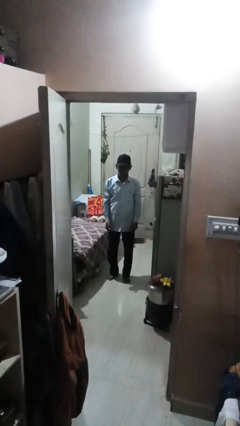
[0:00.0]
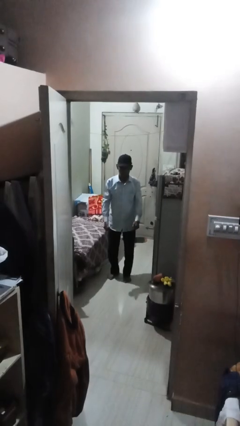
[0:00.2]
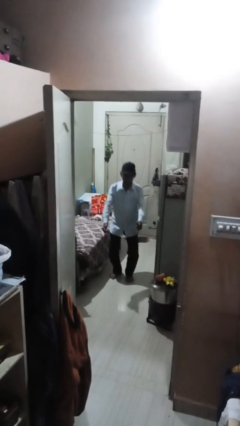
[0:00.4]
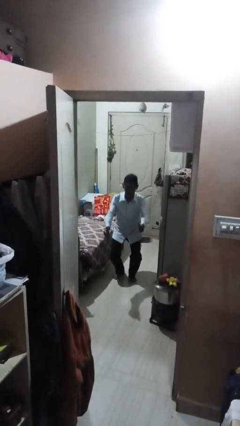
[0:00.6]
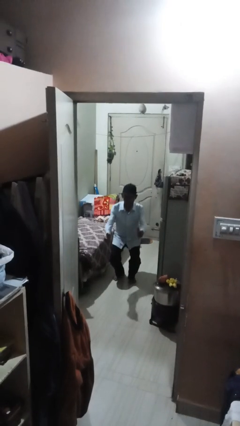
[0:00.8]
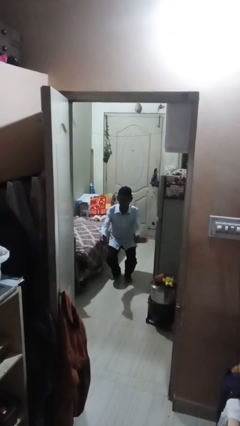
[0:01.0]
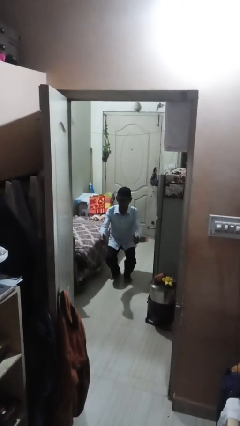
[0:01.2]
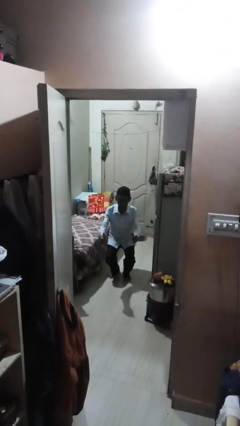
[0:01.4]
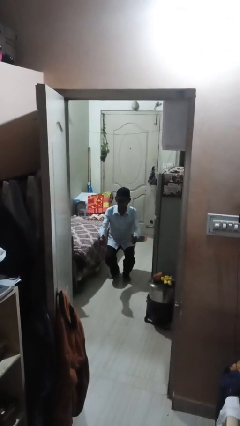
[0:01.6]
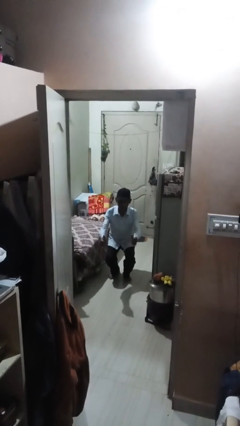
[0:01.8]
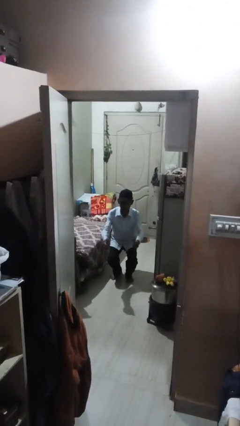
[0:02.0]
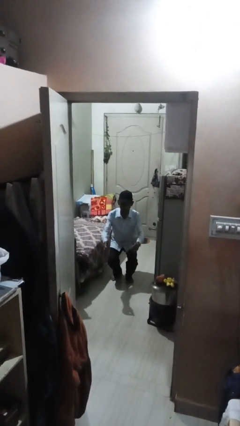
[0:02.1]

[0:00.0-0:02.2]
person squats

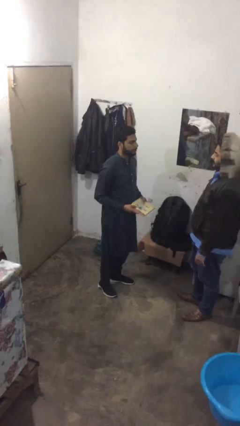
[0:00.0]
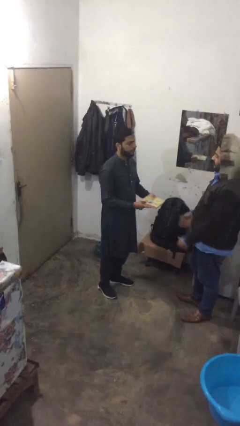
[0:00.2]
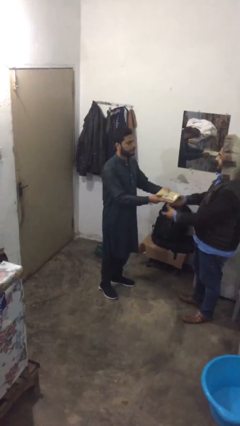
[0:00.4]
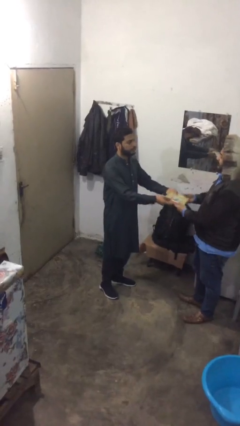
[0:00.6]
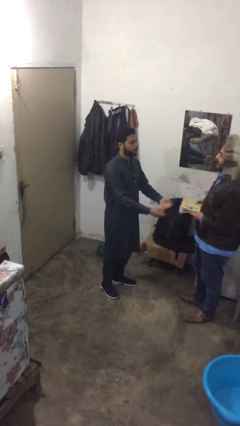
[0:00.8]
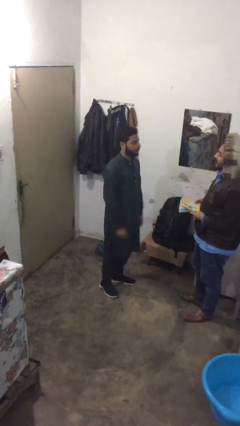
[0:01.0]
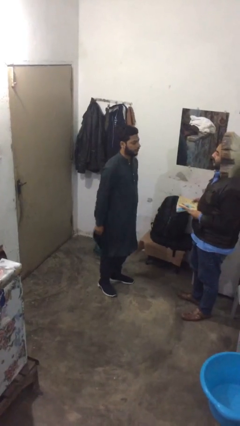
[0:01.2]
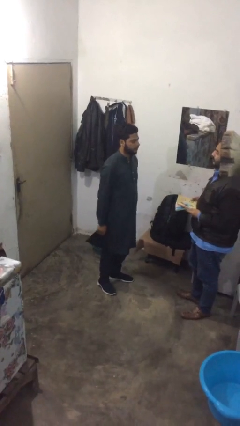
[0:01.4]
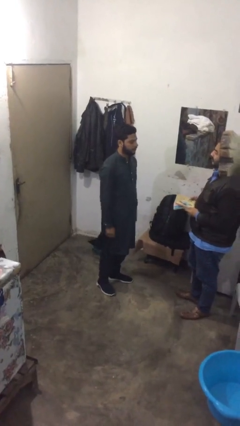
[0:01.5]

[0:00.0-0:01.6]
person transfers object to person

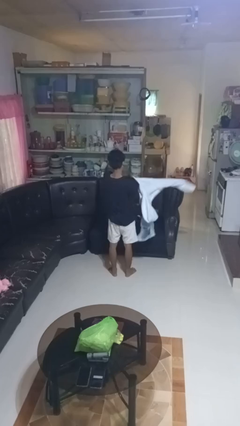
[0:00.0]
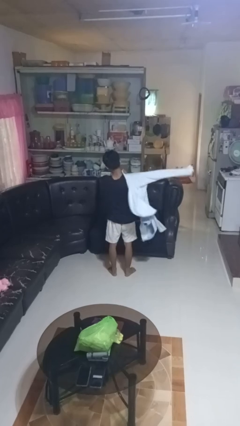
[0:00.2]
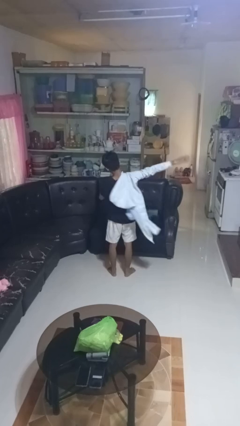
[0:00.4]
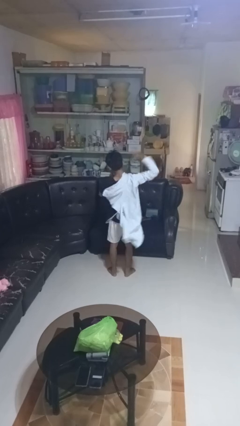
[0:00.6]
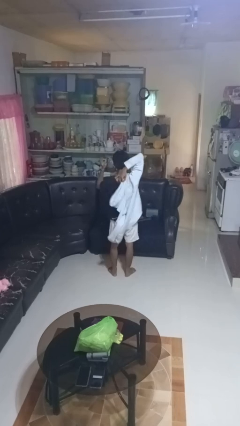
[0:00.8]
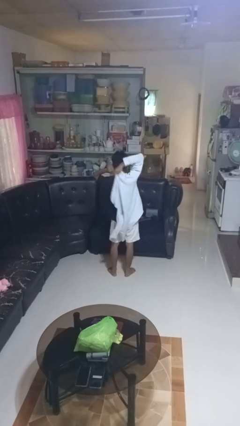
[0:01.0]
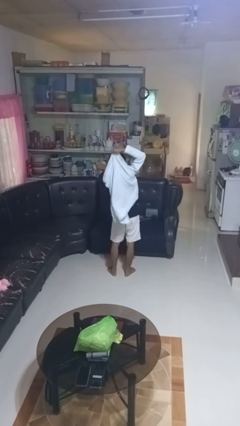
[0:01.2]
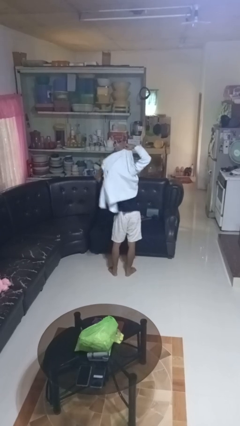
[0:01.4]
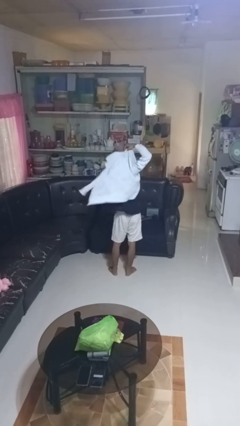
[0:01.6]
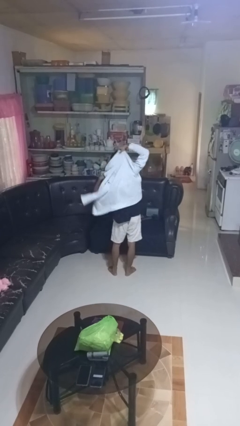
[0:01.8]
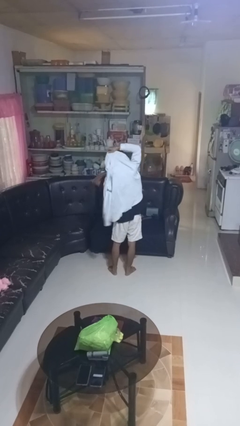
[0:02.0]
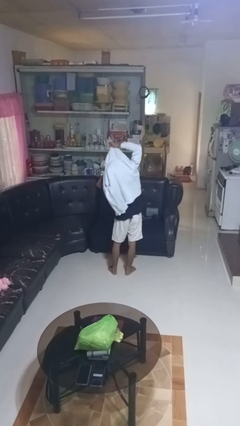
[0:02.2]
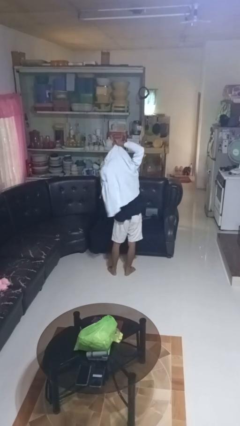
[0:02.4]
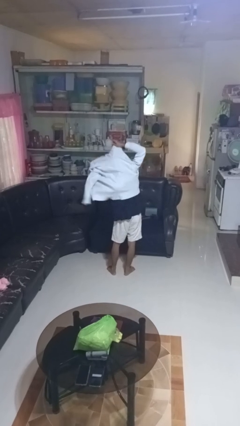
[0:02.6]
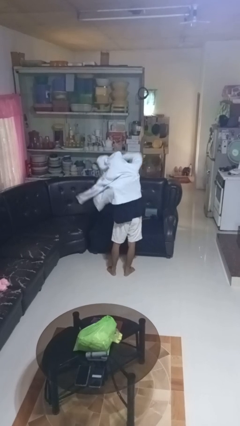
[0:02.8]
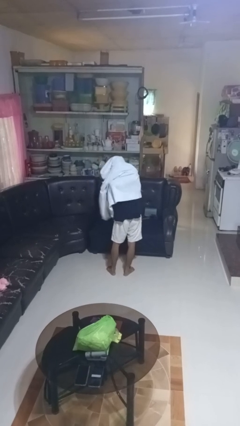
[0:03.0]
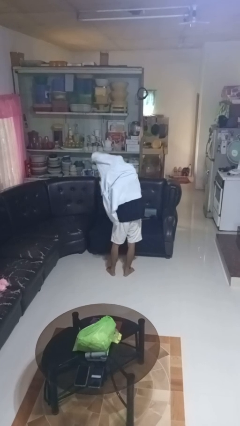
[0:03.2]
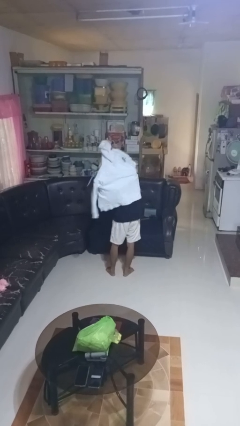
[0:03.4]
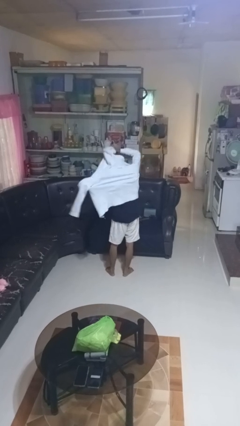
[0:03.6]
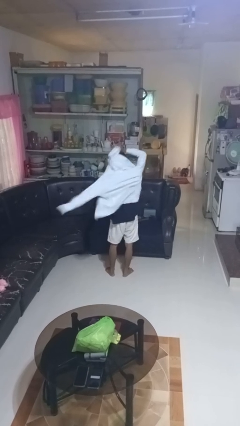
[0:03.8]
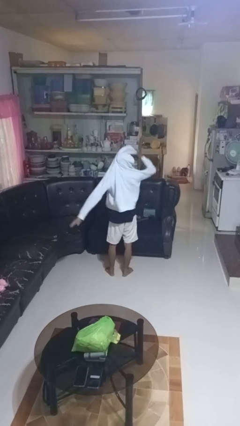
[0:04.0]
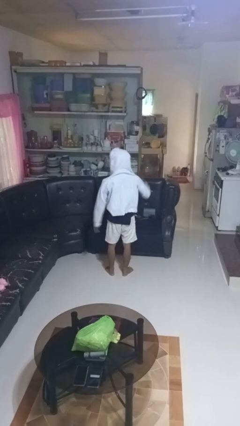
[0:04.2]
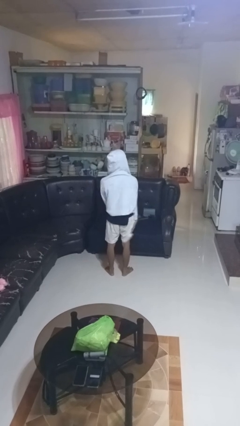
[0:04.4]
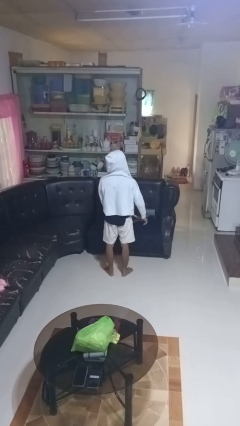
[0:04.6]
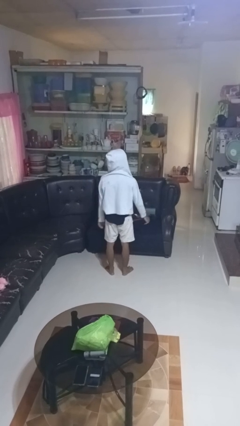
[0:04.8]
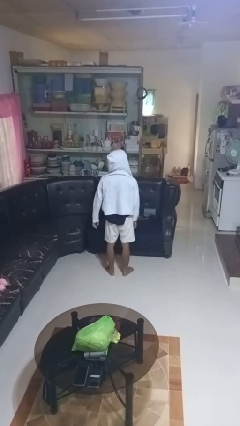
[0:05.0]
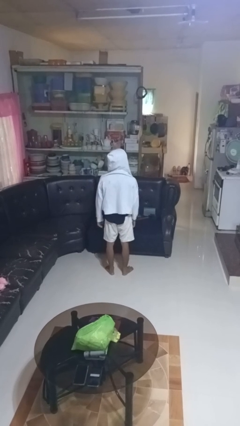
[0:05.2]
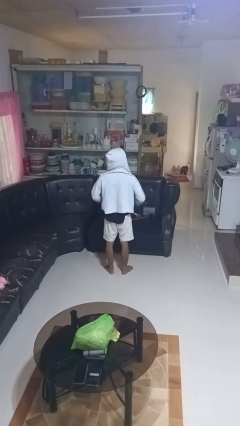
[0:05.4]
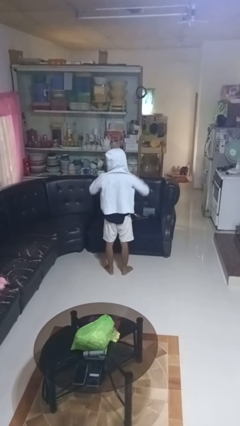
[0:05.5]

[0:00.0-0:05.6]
person puts on hoodie

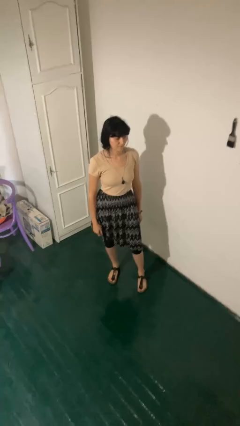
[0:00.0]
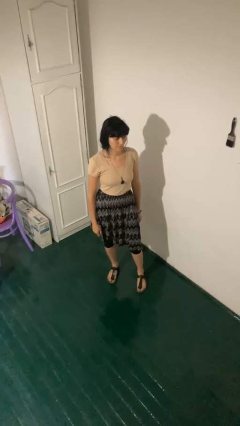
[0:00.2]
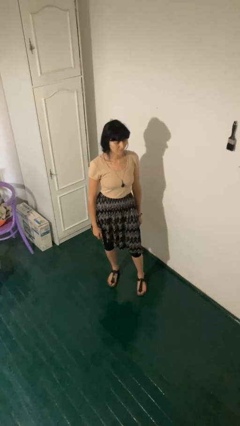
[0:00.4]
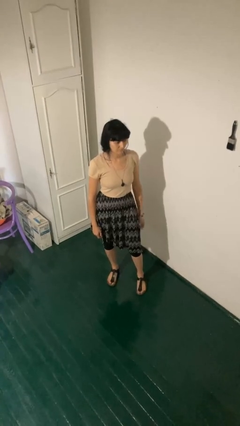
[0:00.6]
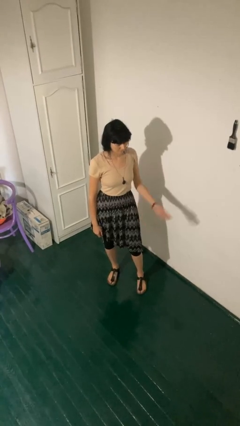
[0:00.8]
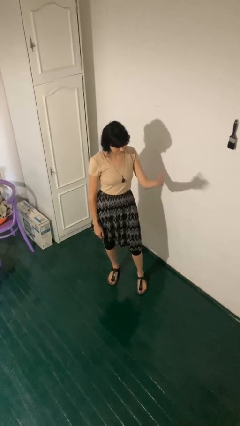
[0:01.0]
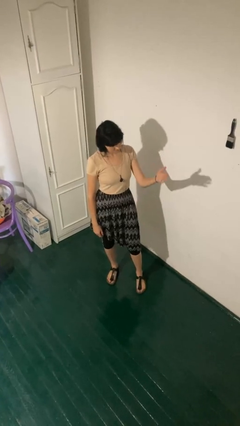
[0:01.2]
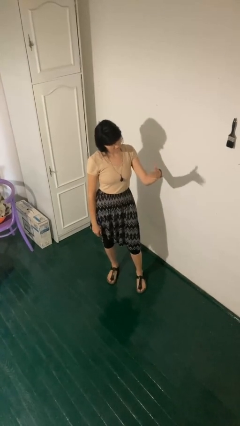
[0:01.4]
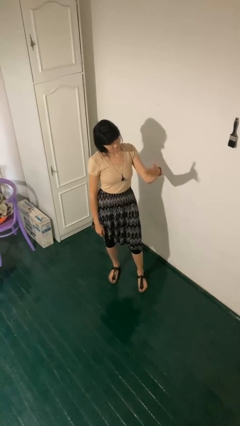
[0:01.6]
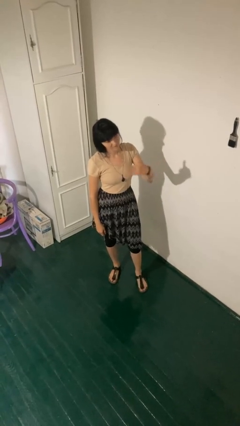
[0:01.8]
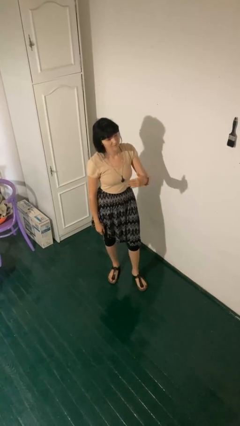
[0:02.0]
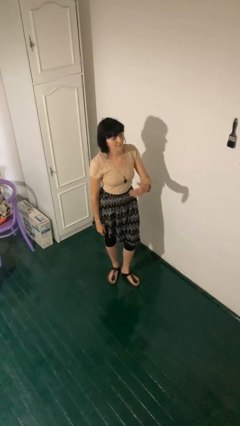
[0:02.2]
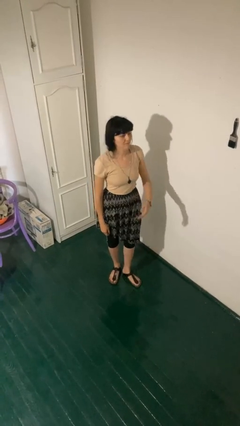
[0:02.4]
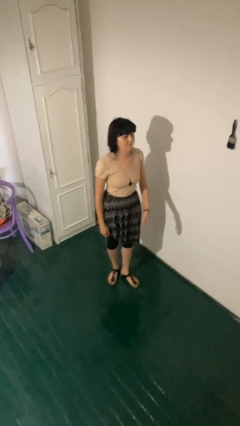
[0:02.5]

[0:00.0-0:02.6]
person gestures come here

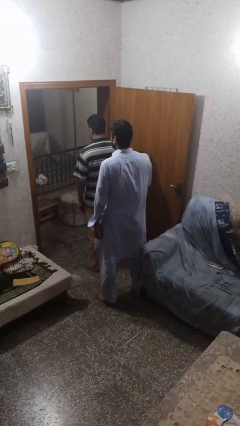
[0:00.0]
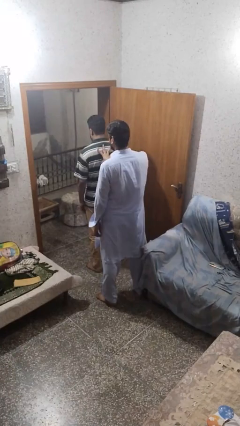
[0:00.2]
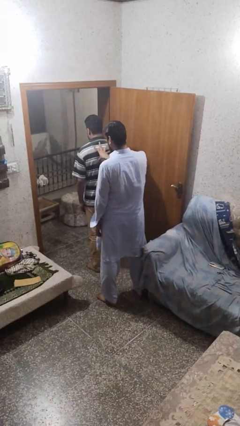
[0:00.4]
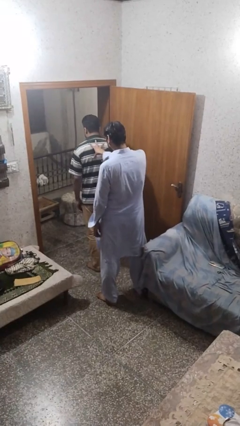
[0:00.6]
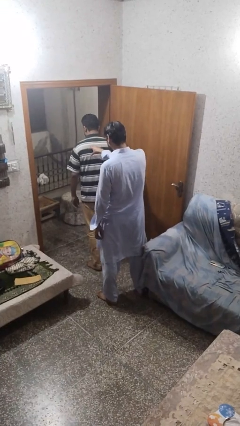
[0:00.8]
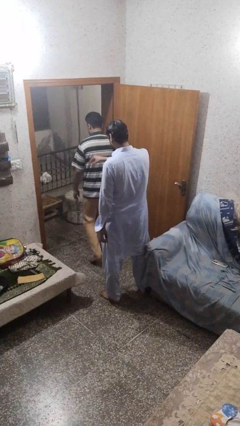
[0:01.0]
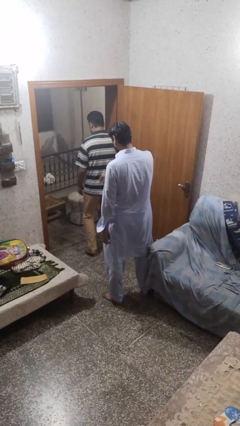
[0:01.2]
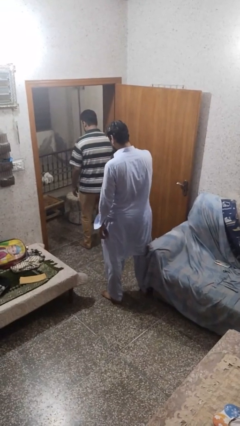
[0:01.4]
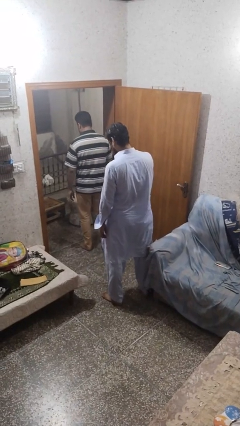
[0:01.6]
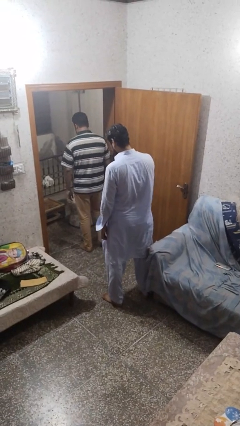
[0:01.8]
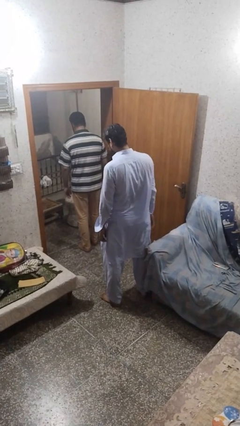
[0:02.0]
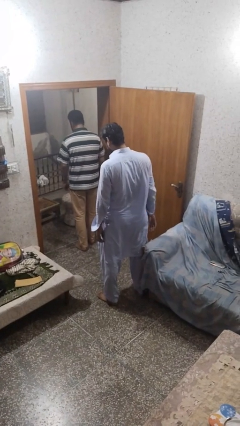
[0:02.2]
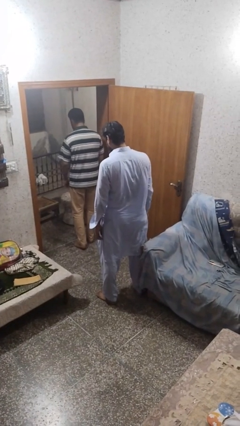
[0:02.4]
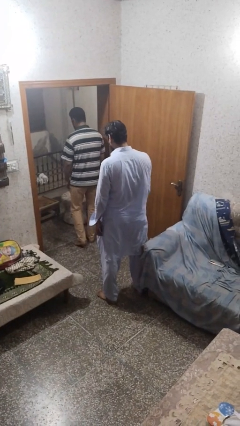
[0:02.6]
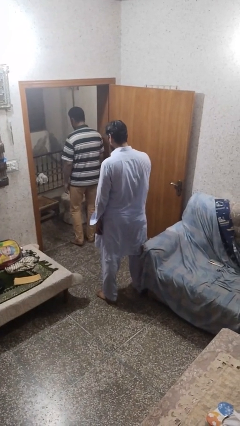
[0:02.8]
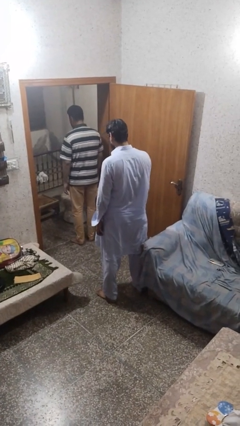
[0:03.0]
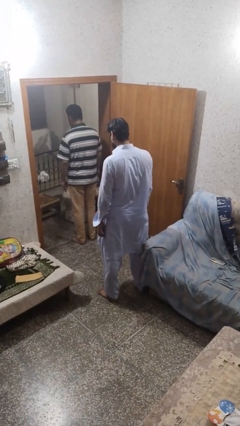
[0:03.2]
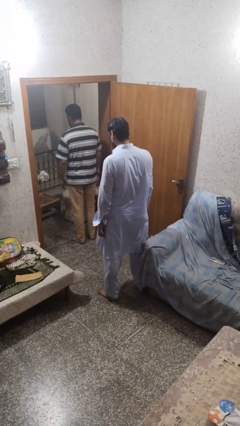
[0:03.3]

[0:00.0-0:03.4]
person shoves person

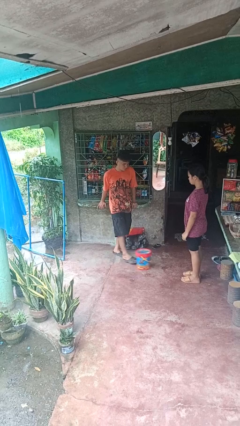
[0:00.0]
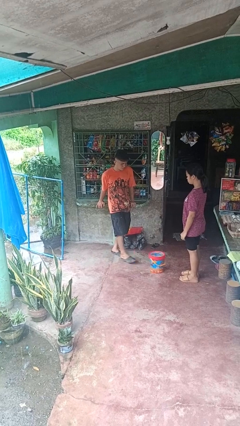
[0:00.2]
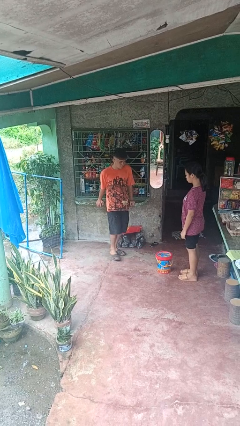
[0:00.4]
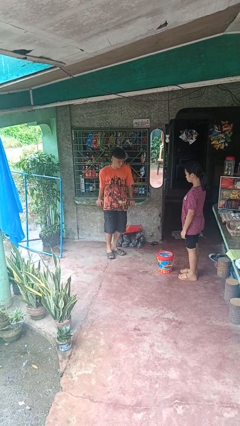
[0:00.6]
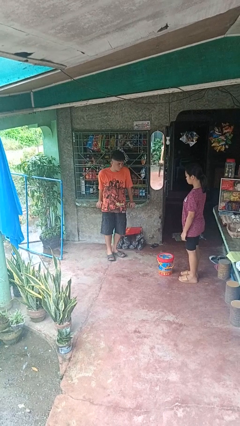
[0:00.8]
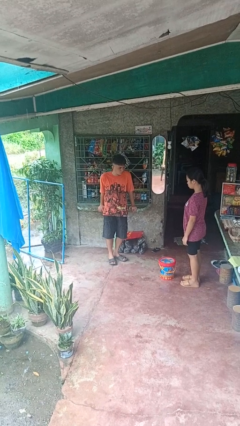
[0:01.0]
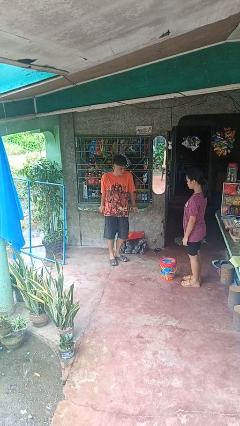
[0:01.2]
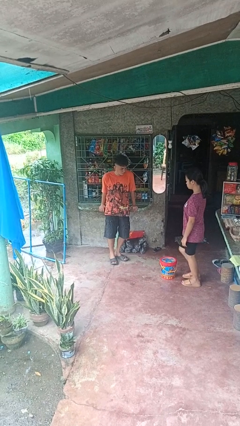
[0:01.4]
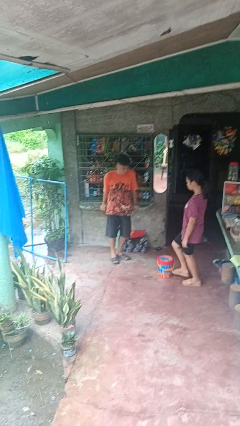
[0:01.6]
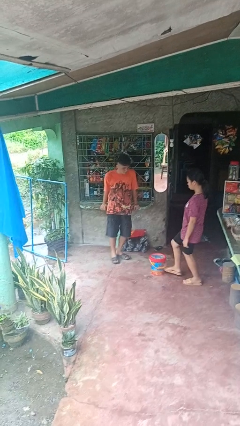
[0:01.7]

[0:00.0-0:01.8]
person kicks object to person
